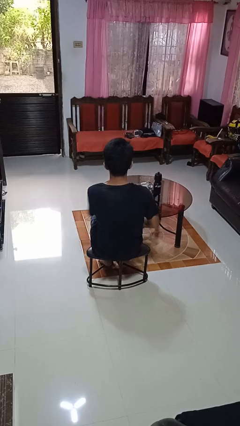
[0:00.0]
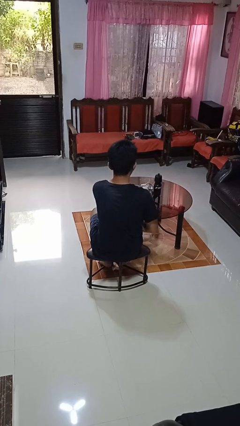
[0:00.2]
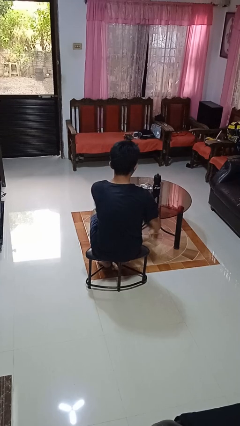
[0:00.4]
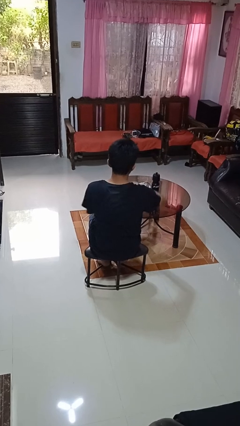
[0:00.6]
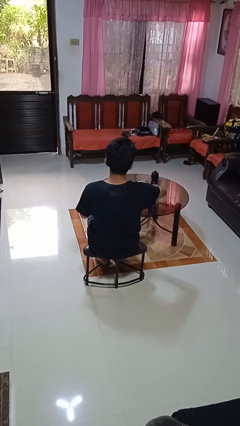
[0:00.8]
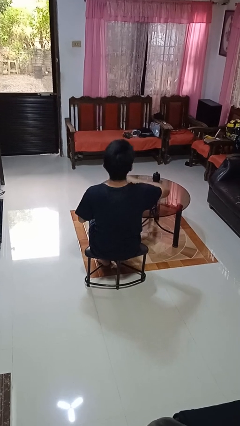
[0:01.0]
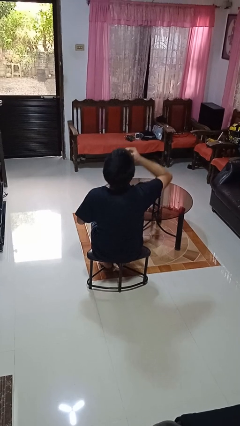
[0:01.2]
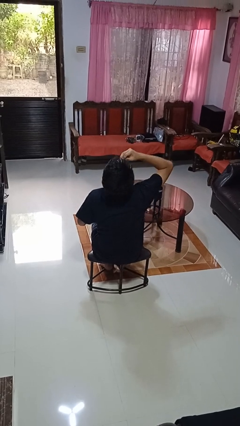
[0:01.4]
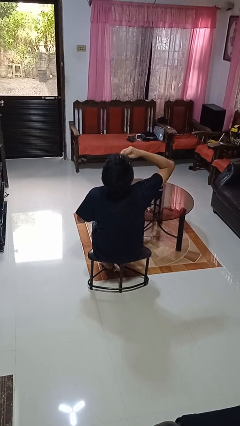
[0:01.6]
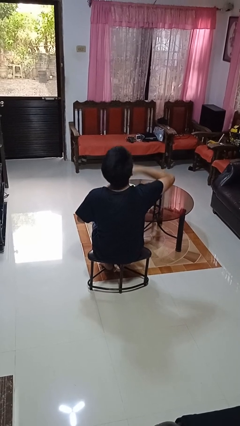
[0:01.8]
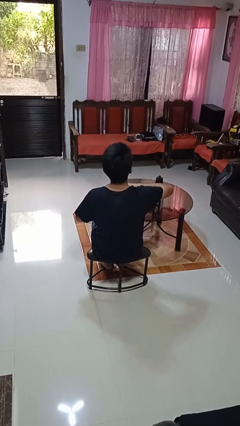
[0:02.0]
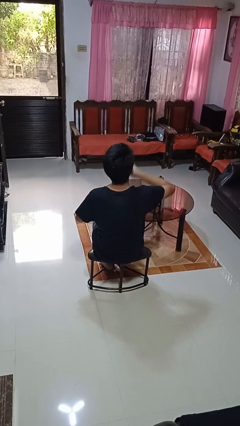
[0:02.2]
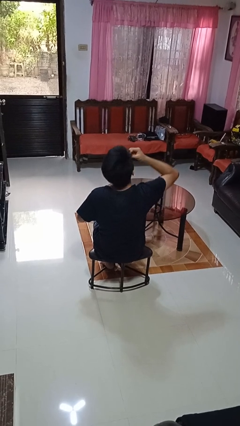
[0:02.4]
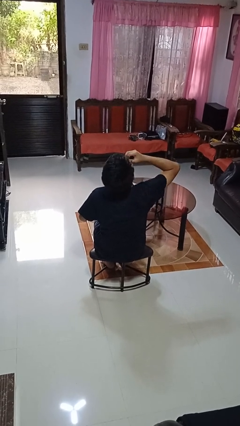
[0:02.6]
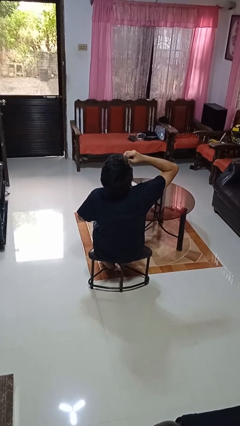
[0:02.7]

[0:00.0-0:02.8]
person eats with hands

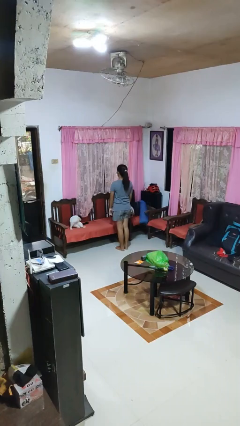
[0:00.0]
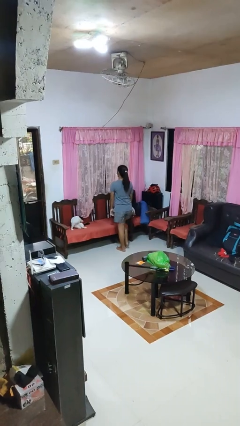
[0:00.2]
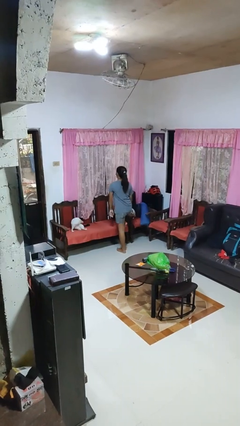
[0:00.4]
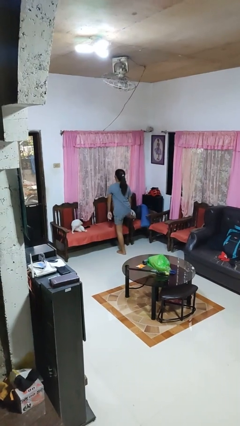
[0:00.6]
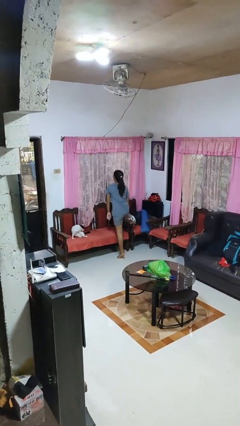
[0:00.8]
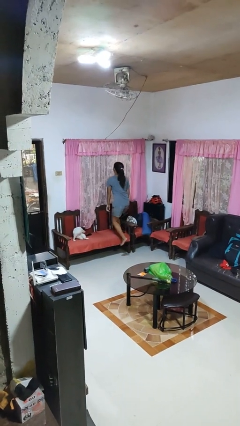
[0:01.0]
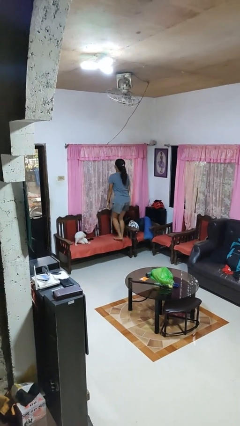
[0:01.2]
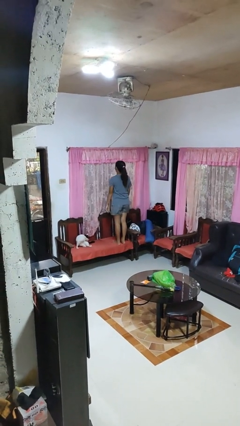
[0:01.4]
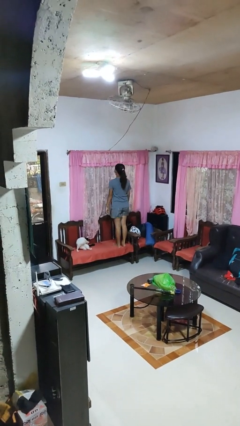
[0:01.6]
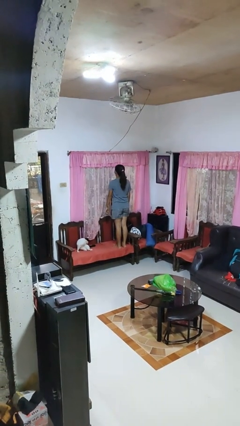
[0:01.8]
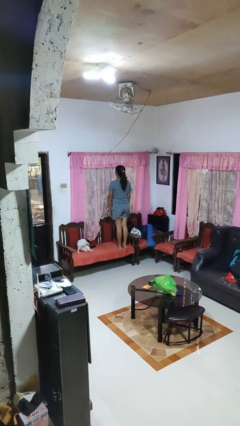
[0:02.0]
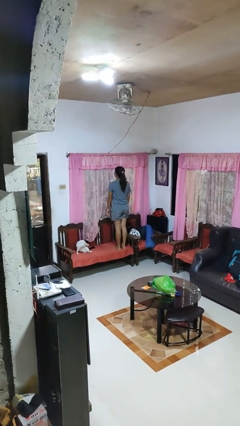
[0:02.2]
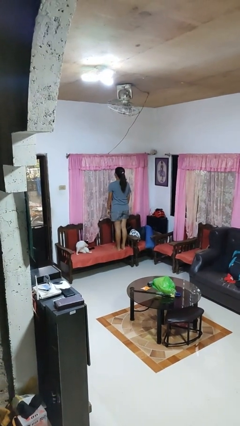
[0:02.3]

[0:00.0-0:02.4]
person climbs on chair

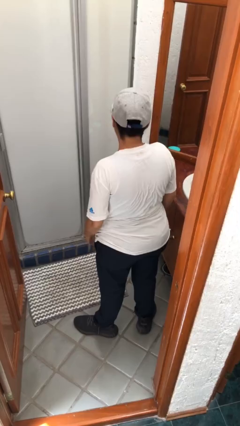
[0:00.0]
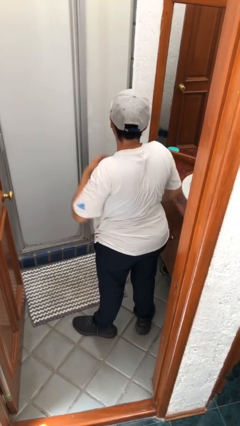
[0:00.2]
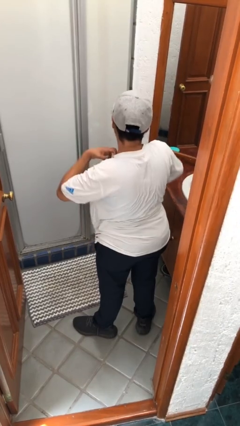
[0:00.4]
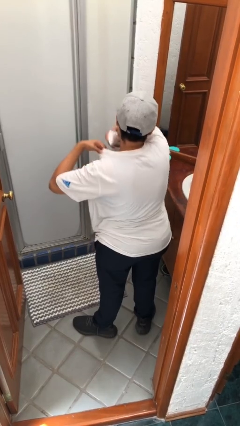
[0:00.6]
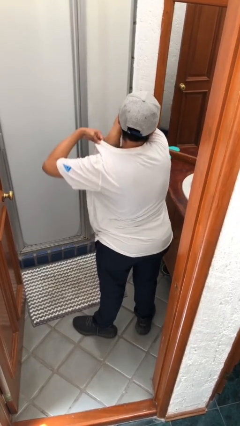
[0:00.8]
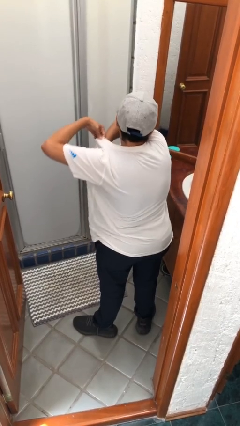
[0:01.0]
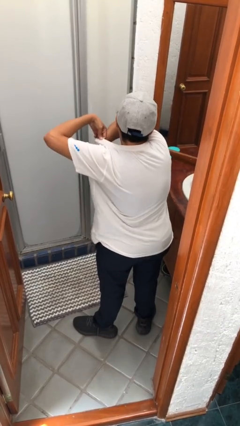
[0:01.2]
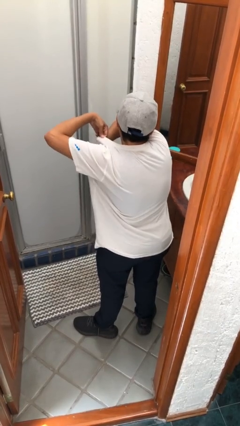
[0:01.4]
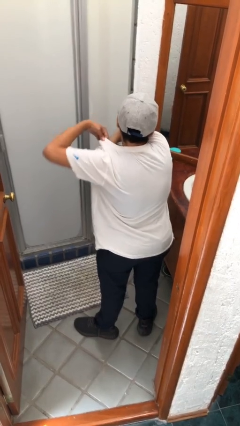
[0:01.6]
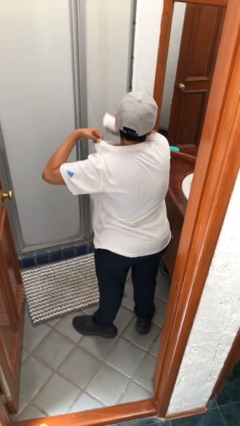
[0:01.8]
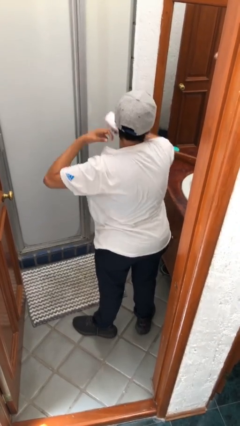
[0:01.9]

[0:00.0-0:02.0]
person applies deodorant

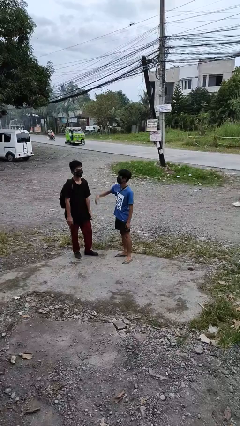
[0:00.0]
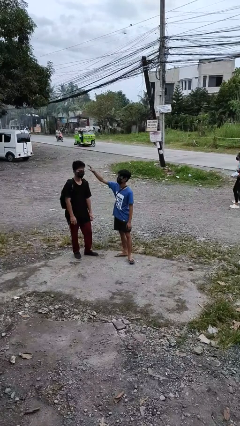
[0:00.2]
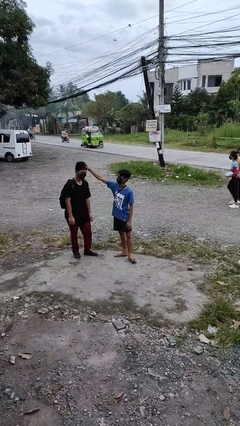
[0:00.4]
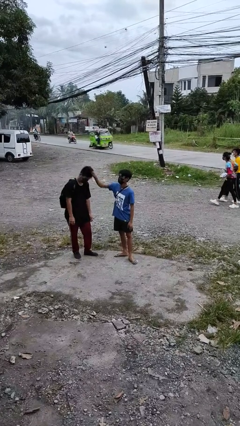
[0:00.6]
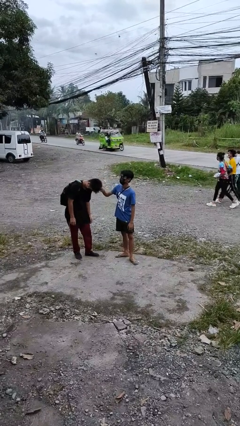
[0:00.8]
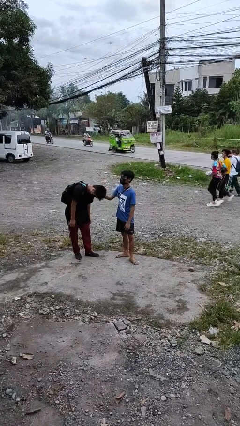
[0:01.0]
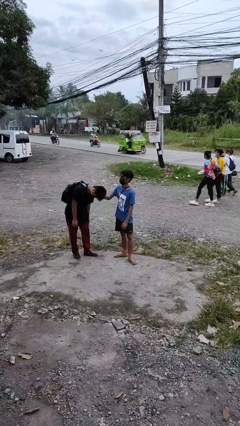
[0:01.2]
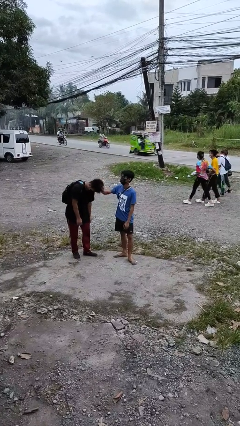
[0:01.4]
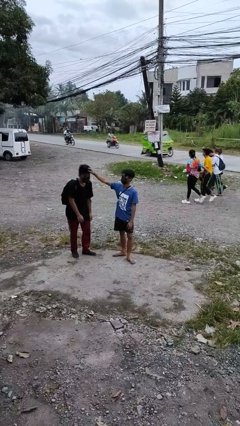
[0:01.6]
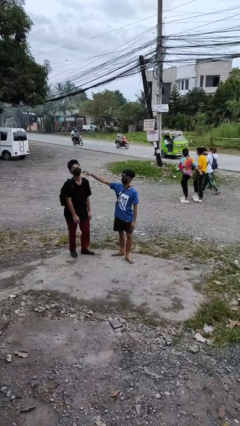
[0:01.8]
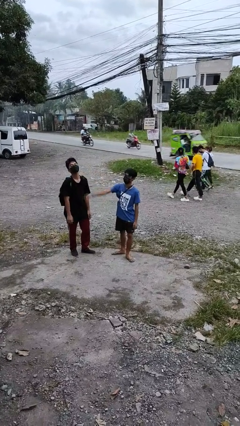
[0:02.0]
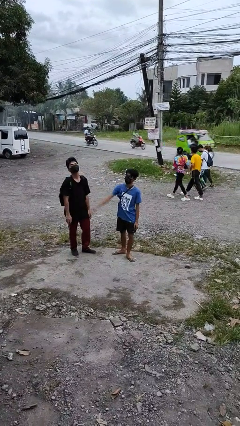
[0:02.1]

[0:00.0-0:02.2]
person grabs person by hair

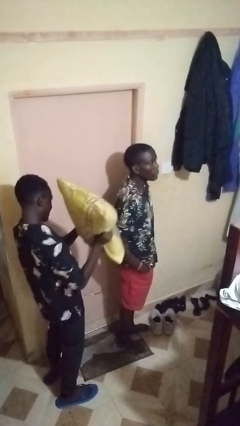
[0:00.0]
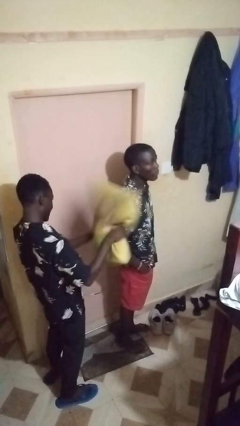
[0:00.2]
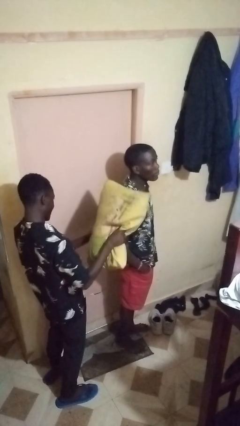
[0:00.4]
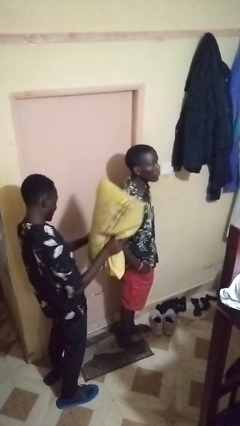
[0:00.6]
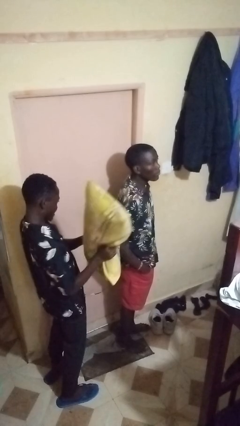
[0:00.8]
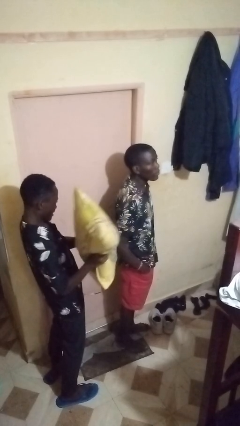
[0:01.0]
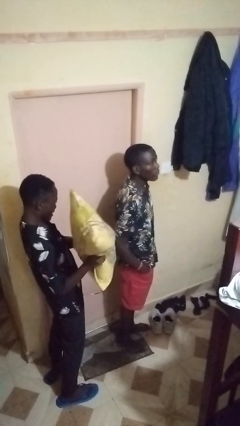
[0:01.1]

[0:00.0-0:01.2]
person hits person with pillow

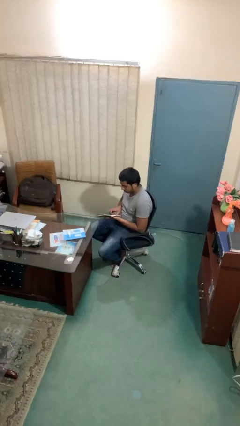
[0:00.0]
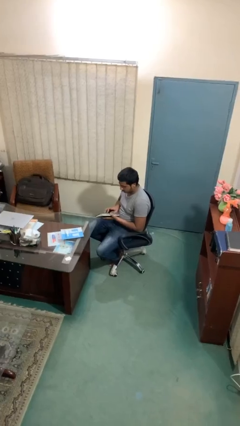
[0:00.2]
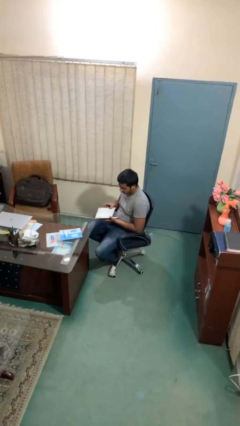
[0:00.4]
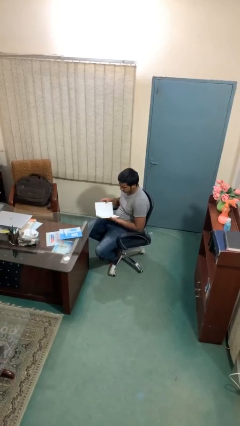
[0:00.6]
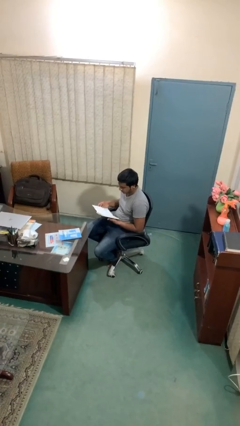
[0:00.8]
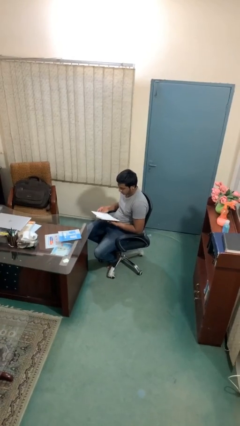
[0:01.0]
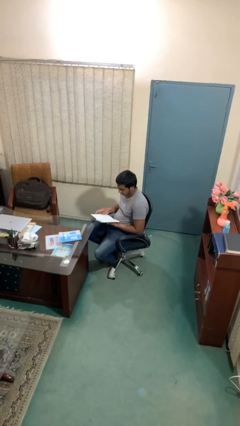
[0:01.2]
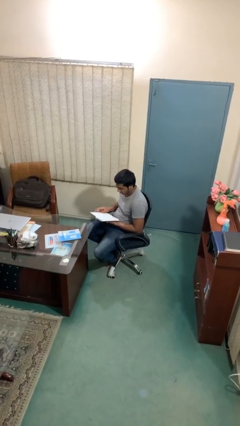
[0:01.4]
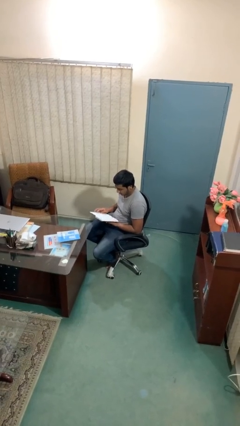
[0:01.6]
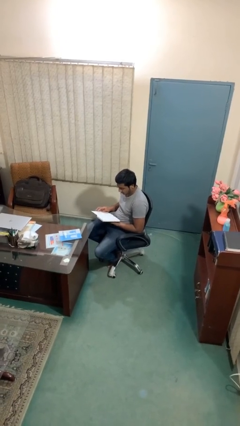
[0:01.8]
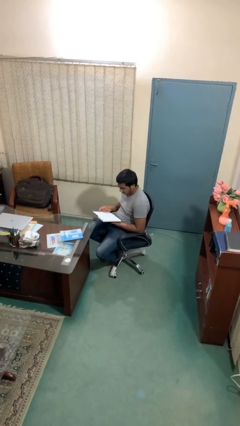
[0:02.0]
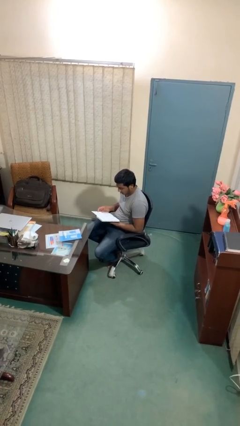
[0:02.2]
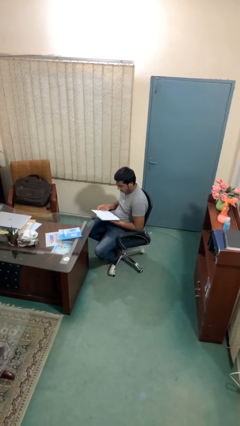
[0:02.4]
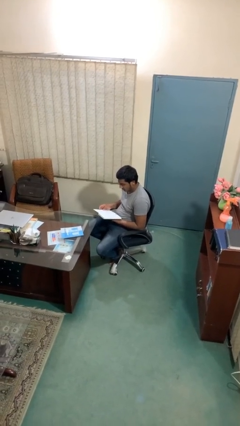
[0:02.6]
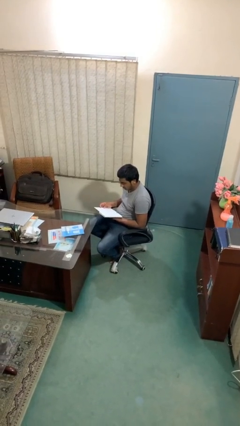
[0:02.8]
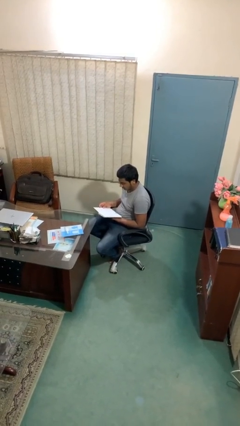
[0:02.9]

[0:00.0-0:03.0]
person reads document

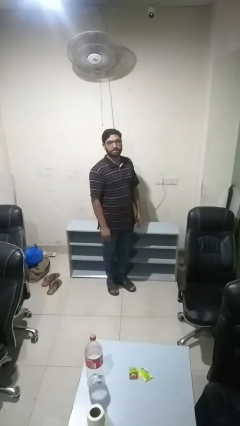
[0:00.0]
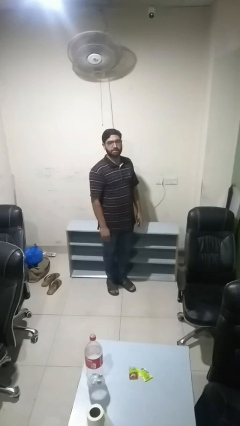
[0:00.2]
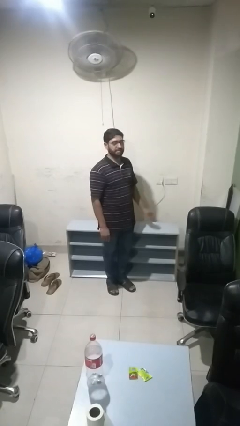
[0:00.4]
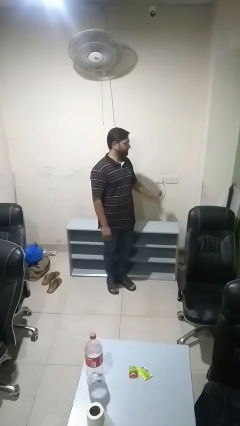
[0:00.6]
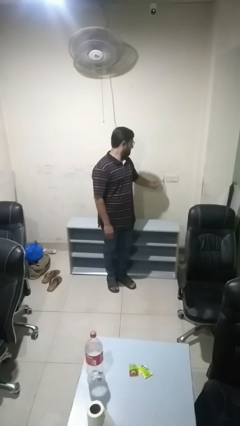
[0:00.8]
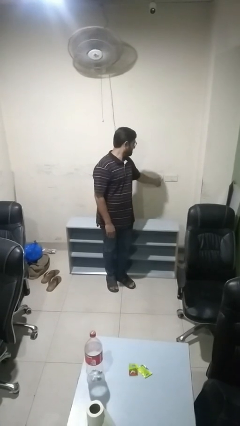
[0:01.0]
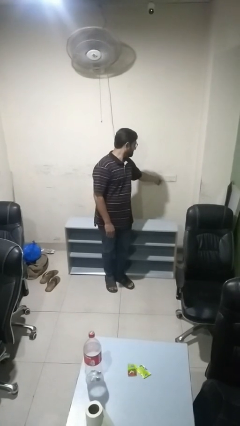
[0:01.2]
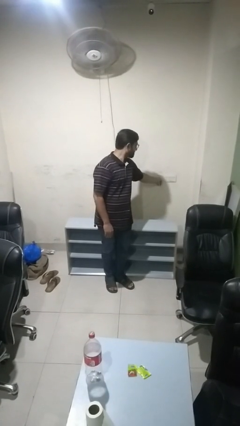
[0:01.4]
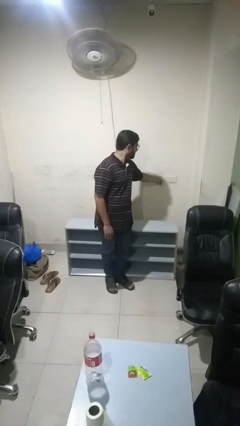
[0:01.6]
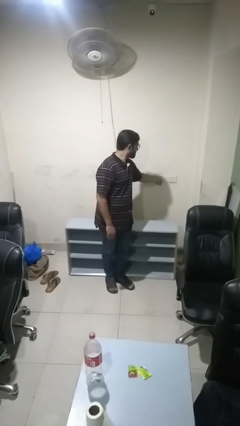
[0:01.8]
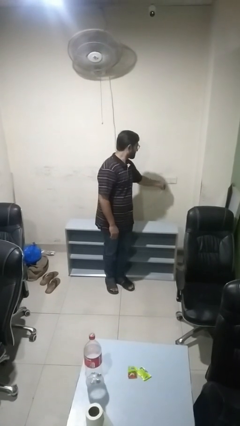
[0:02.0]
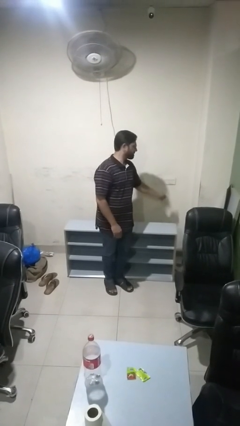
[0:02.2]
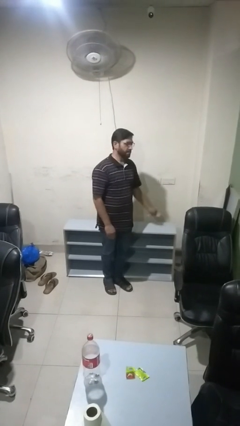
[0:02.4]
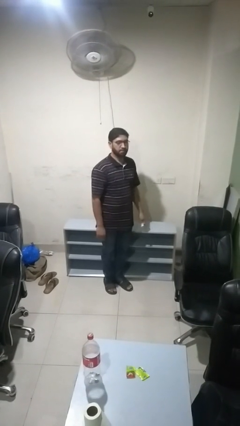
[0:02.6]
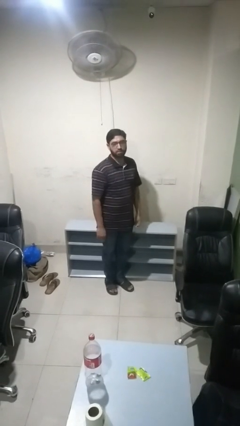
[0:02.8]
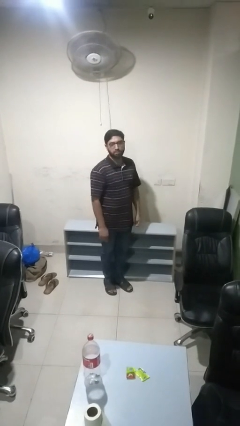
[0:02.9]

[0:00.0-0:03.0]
person unplugs from electrical socket

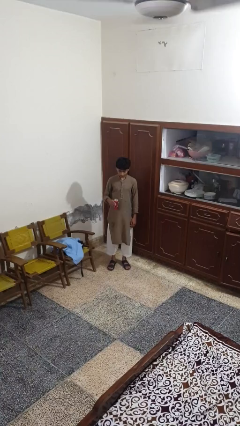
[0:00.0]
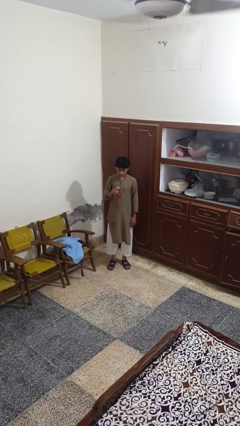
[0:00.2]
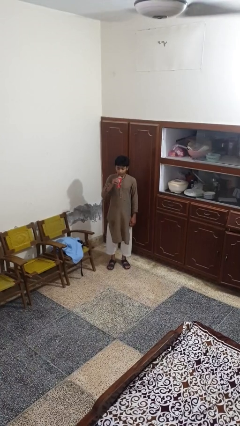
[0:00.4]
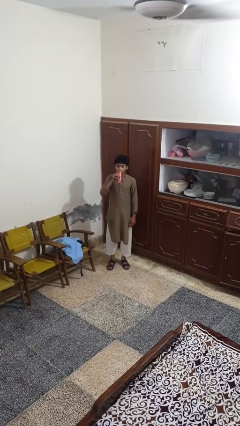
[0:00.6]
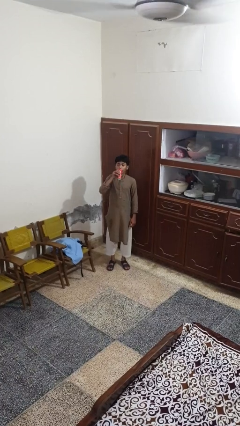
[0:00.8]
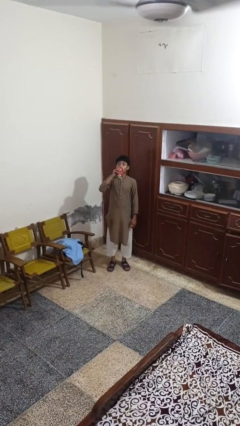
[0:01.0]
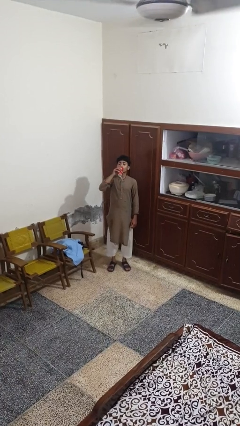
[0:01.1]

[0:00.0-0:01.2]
person drinks from beverage can
